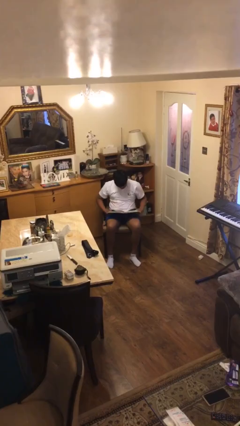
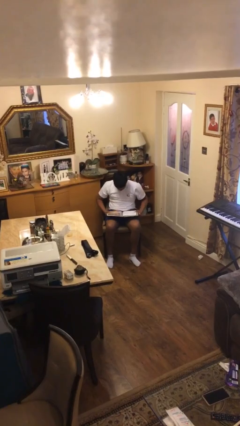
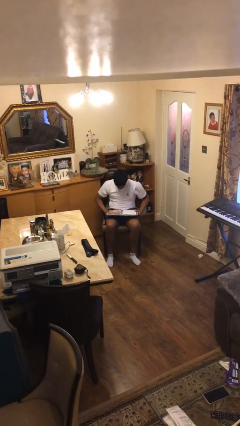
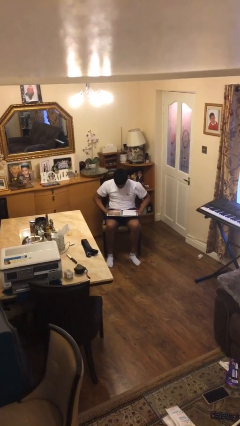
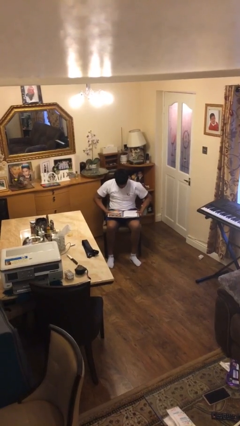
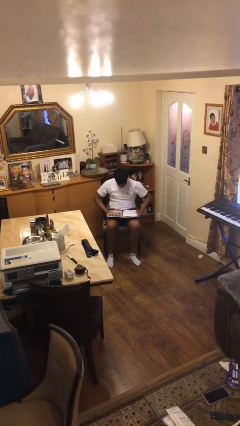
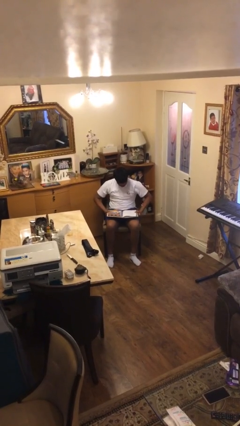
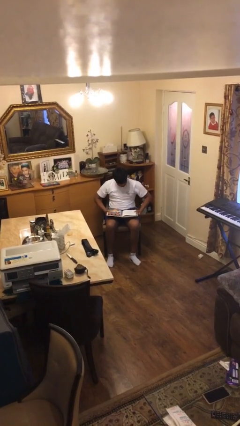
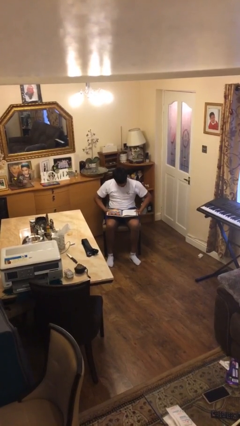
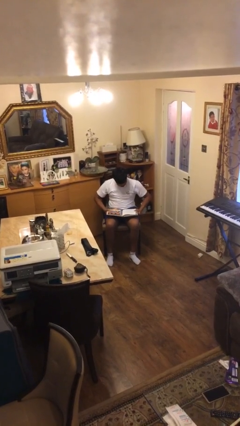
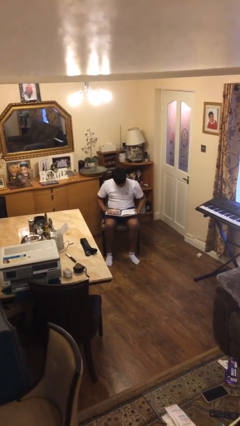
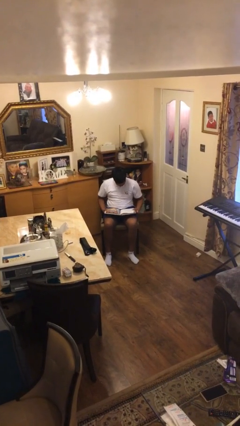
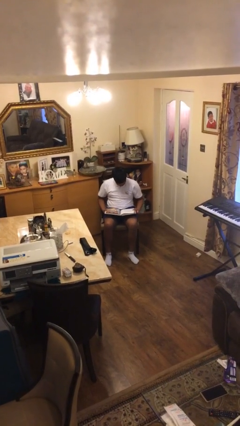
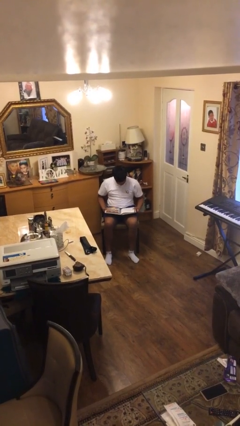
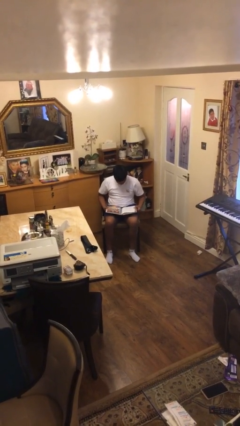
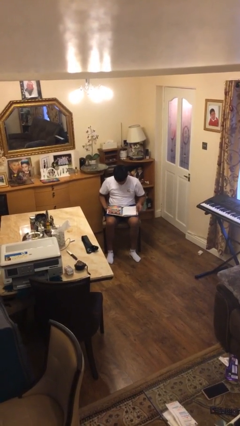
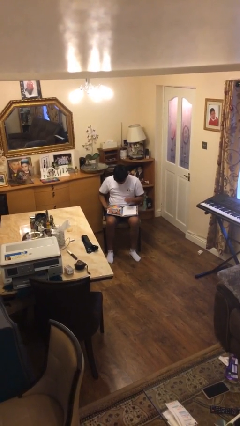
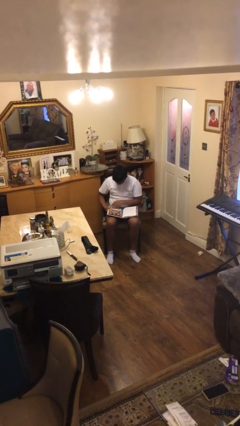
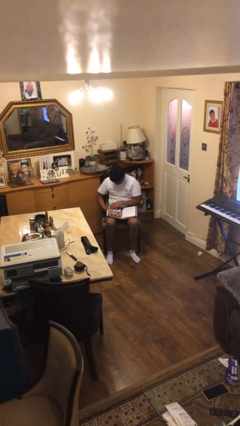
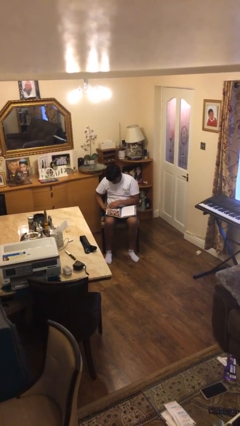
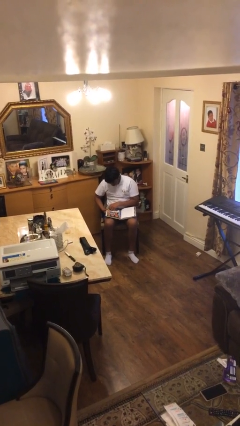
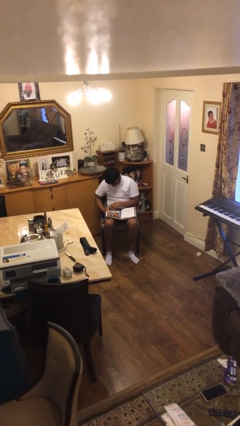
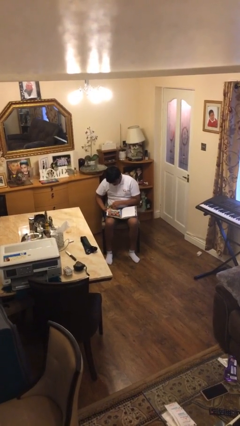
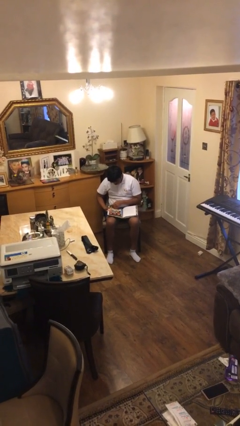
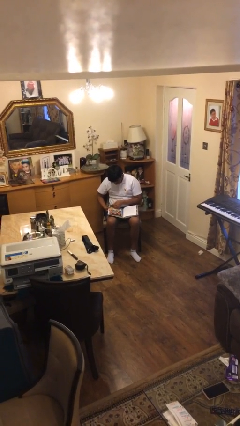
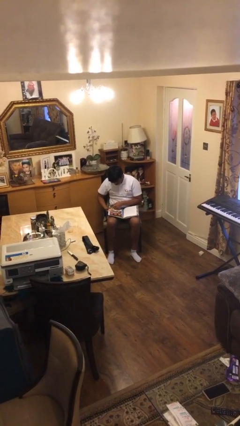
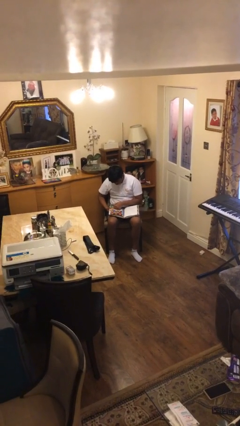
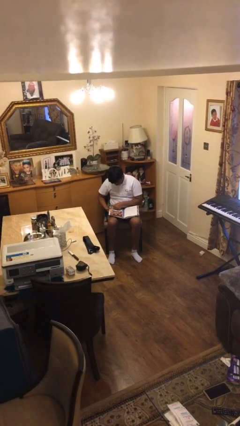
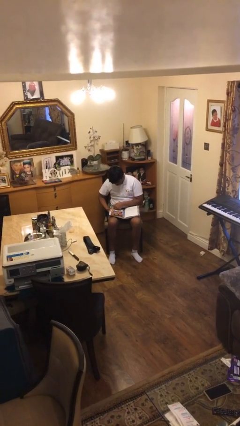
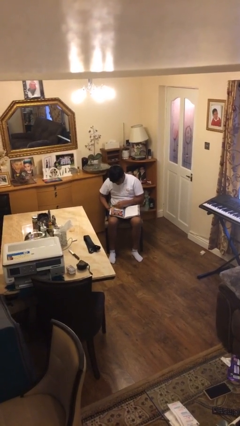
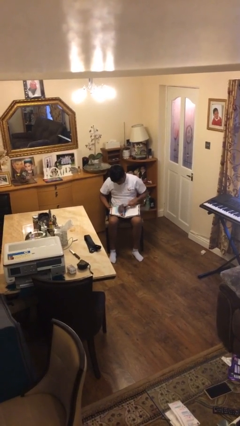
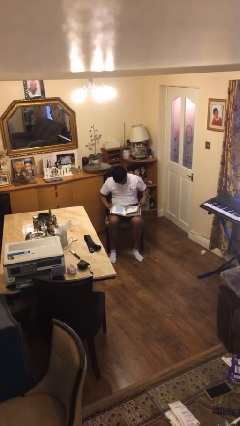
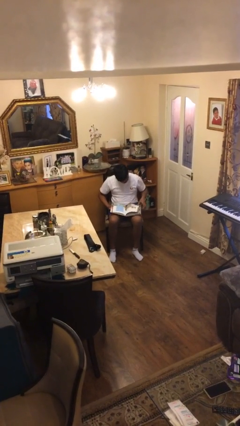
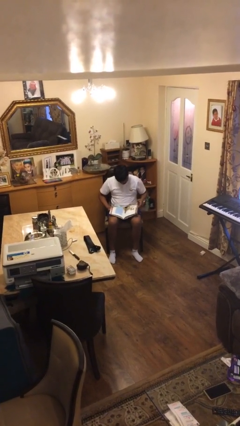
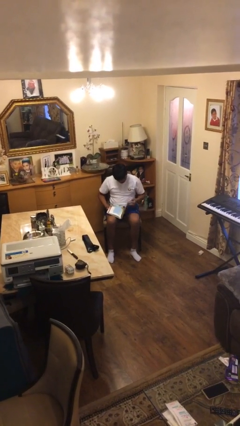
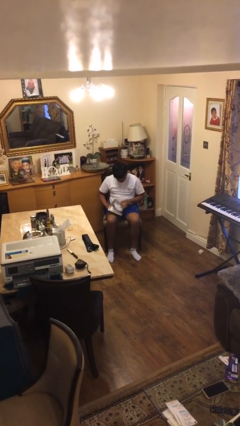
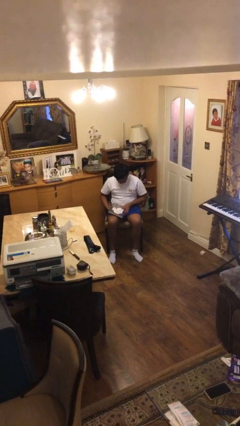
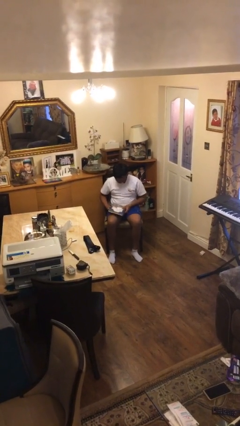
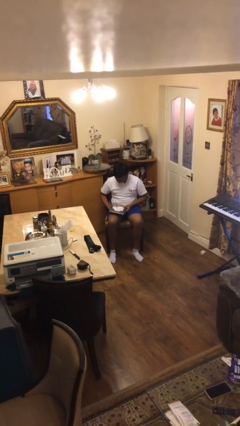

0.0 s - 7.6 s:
person reads document

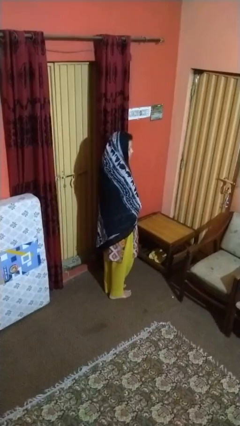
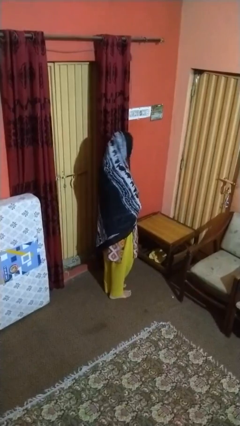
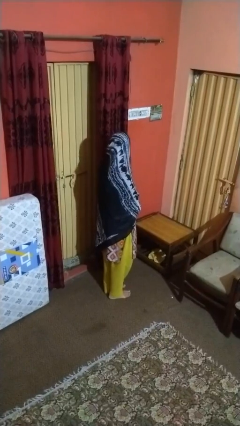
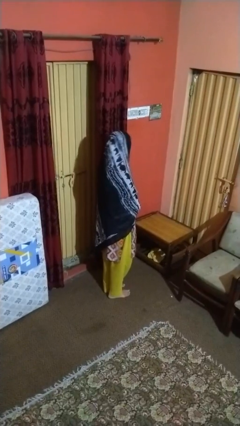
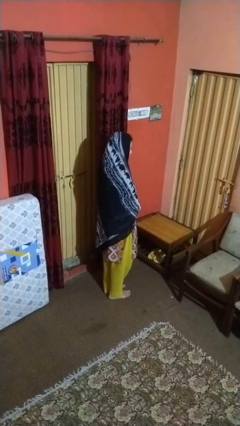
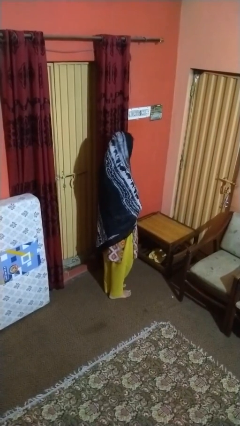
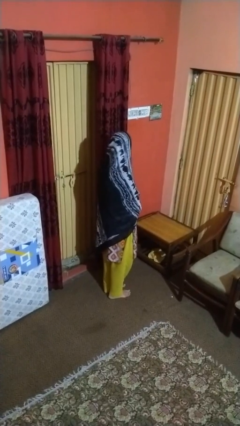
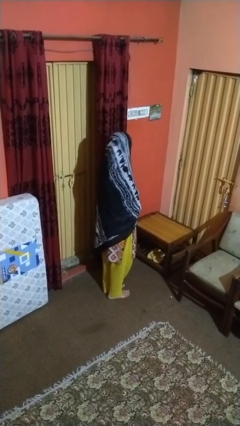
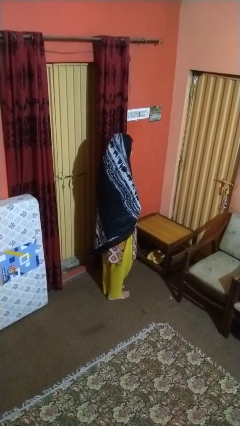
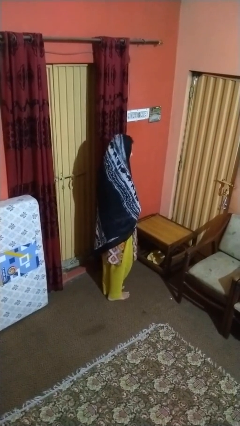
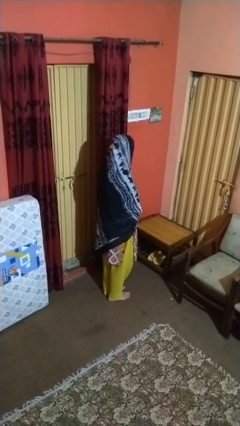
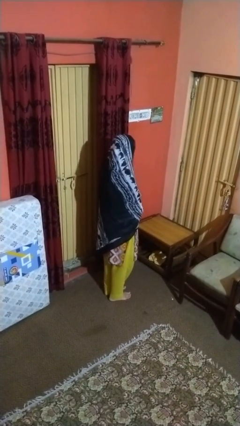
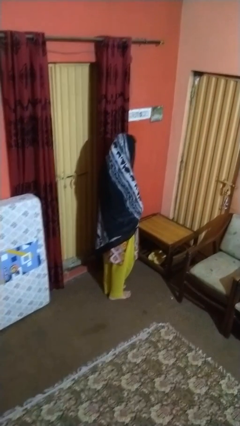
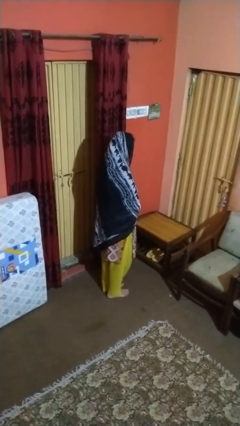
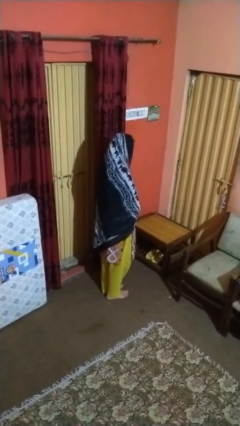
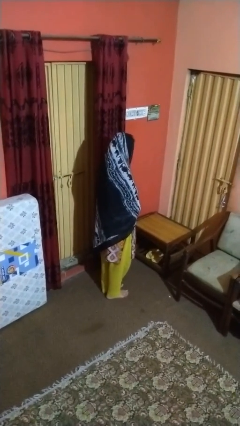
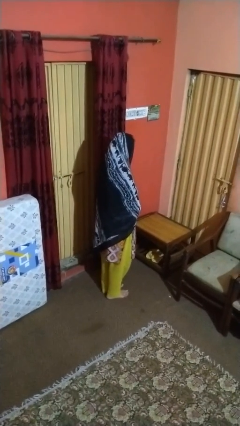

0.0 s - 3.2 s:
person shakes head

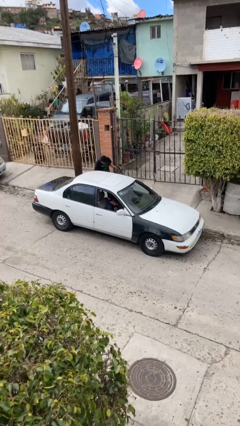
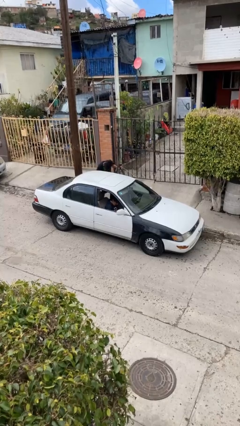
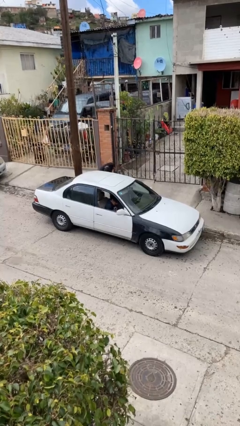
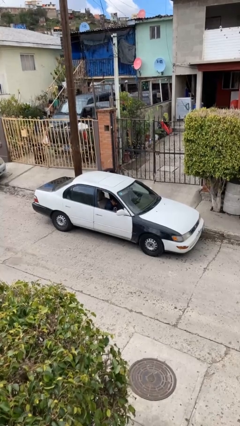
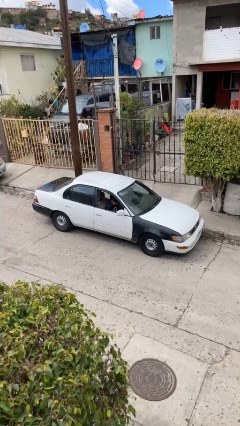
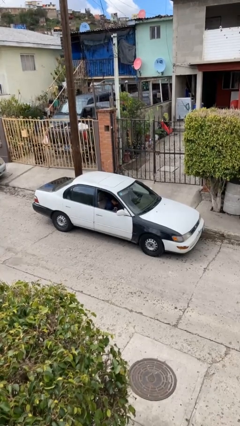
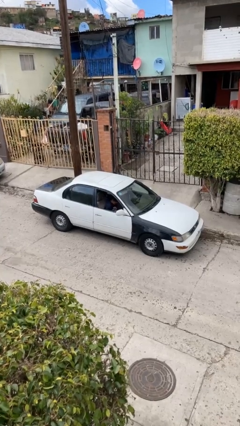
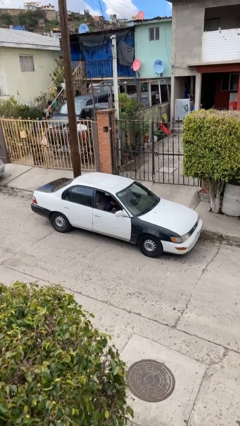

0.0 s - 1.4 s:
car picks up person

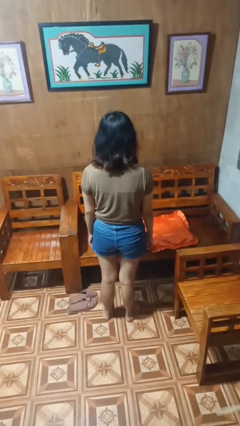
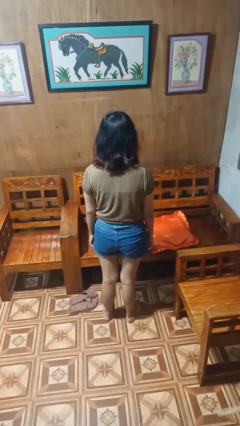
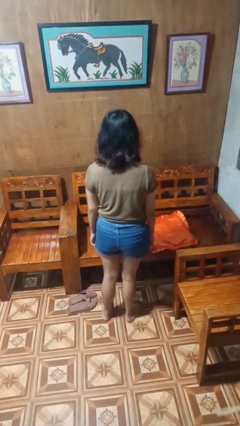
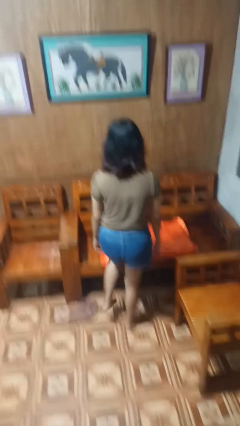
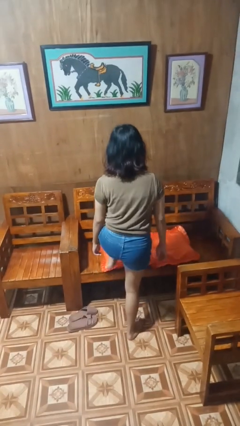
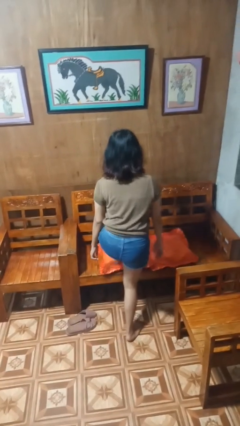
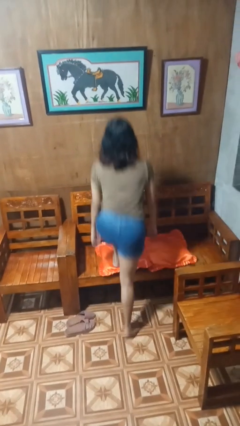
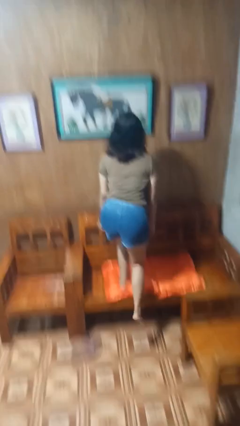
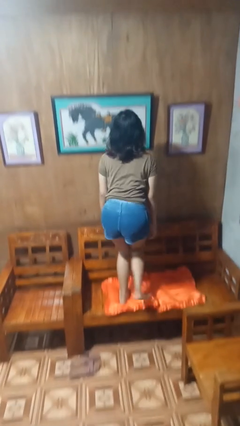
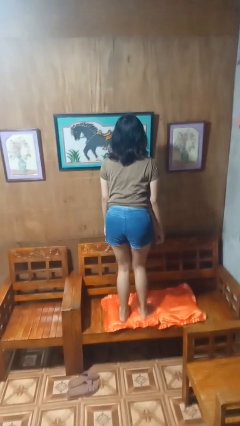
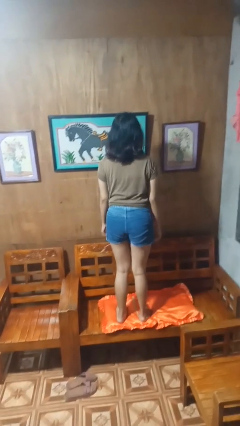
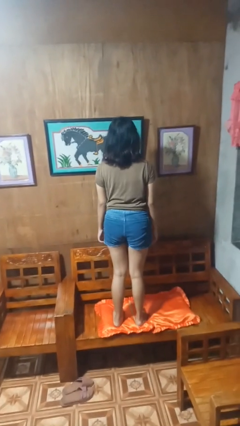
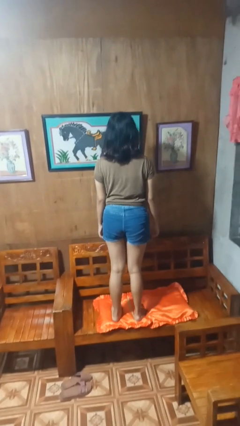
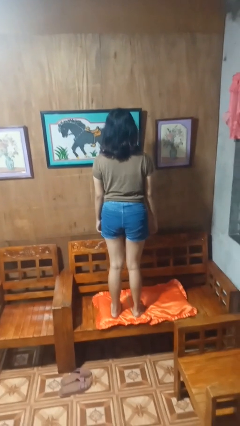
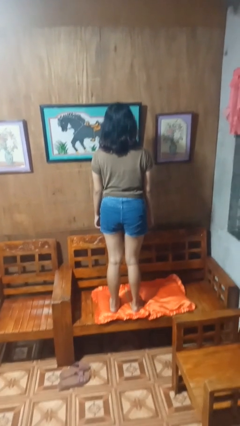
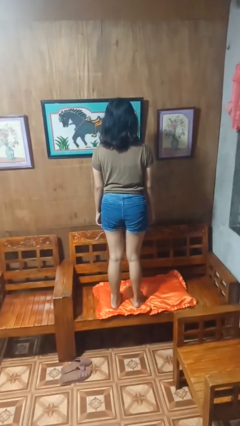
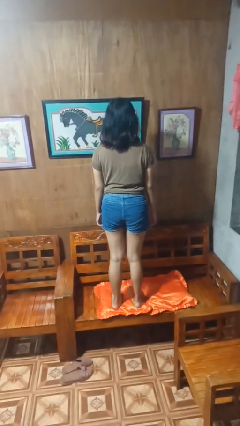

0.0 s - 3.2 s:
person climbs on couch

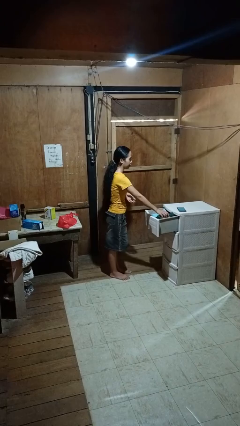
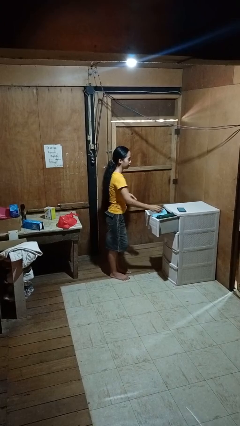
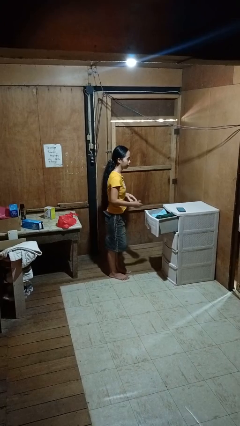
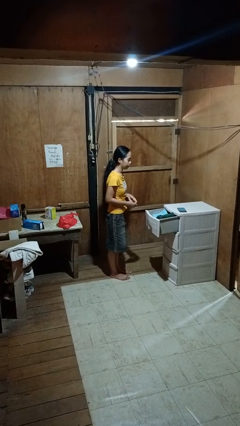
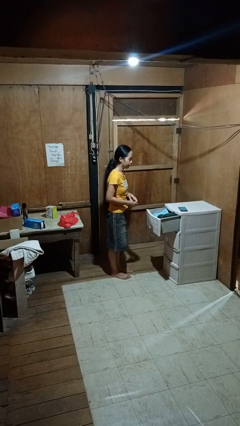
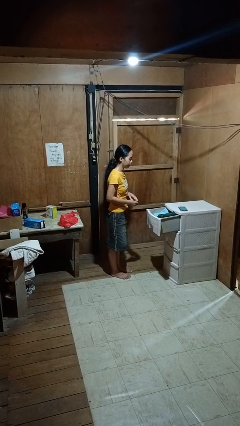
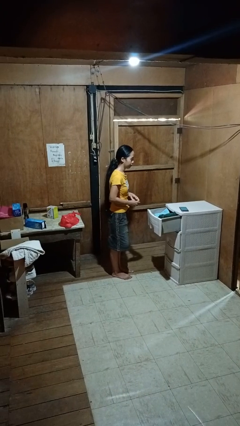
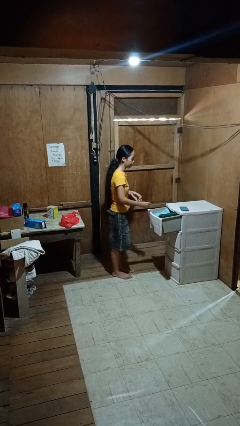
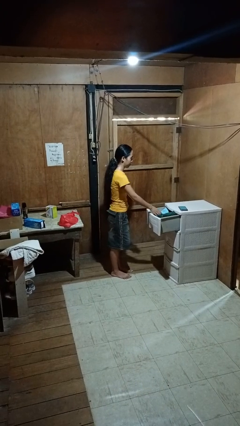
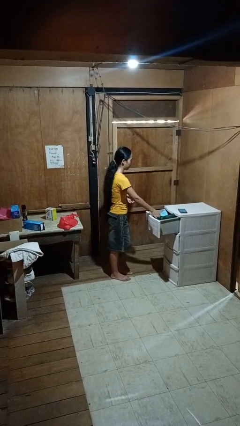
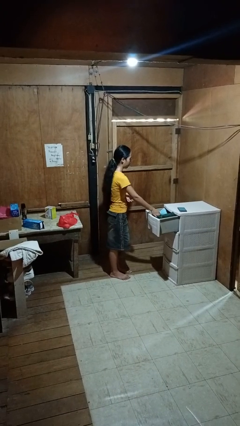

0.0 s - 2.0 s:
person puts clothes into dresser

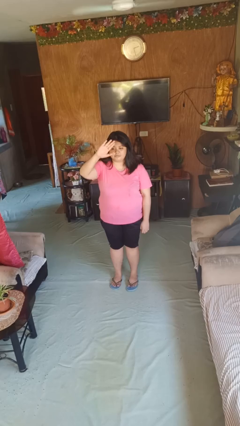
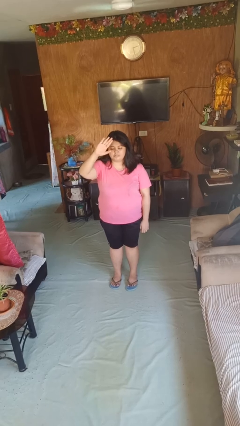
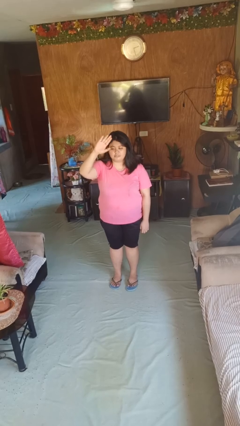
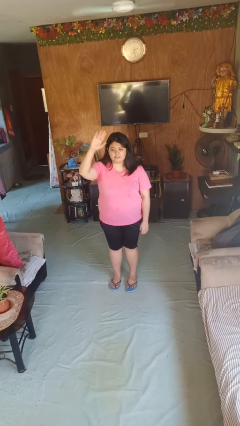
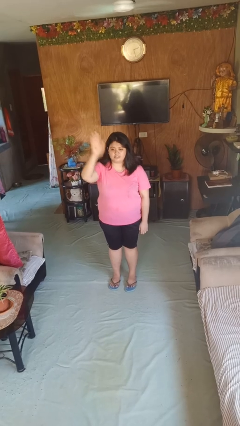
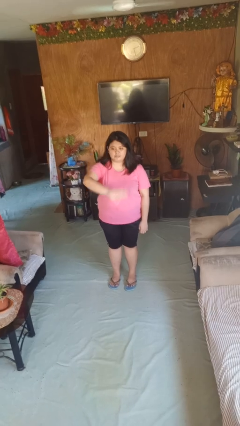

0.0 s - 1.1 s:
person gestures swipe down
